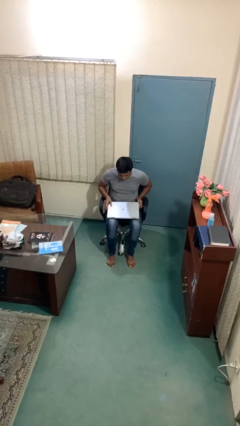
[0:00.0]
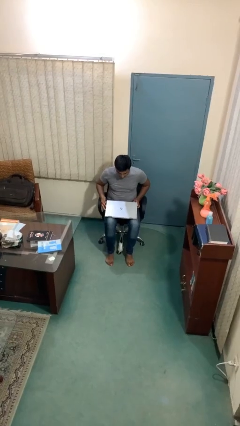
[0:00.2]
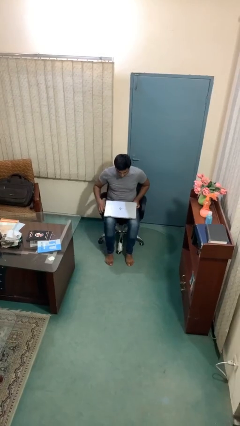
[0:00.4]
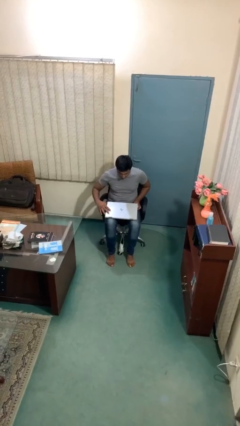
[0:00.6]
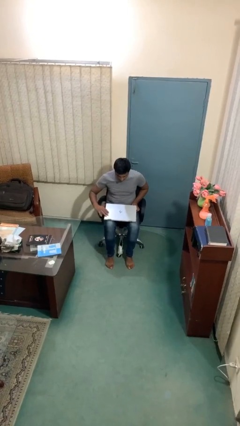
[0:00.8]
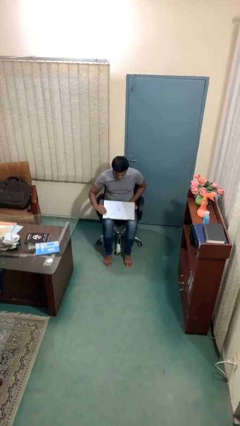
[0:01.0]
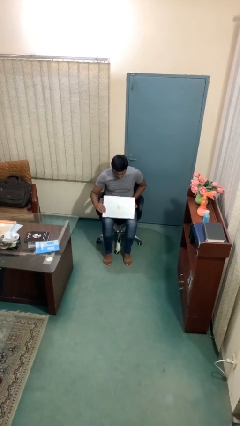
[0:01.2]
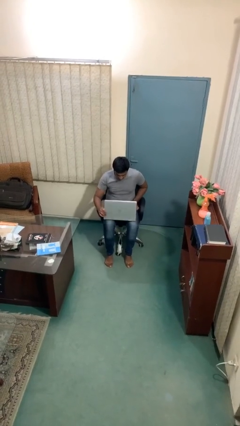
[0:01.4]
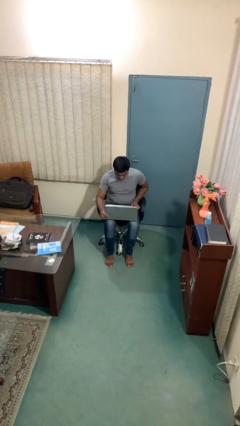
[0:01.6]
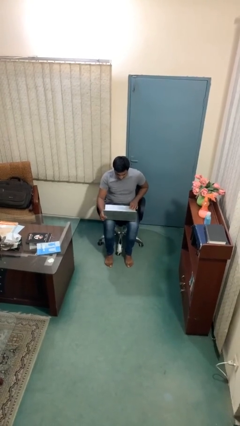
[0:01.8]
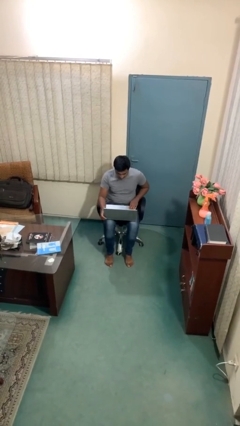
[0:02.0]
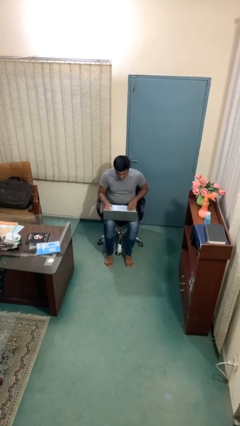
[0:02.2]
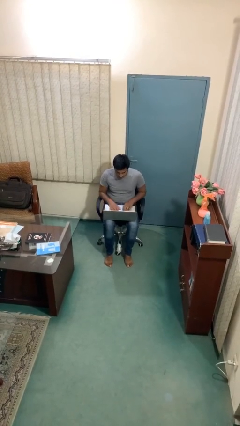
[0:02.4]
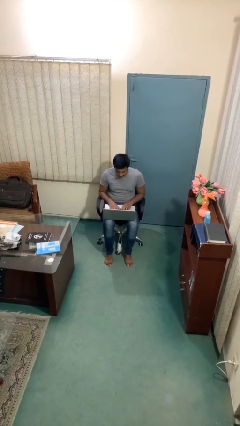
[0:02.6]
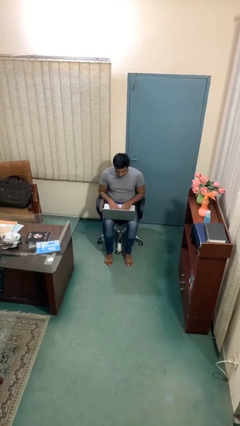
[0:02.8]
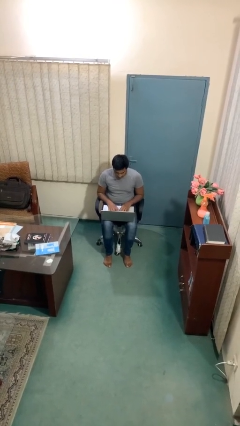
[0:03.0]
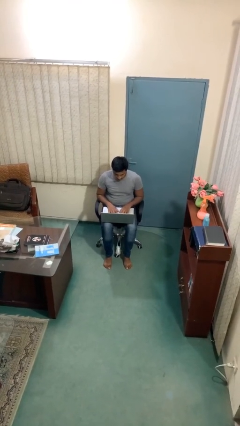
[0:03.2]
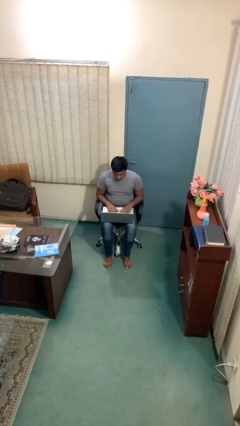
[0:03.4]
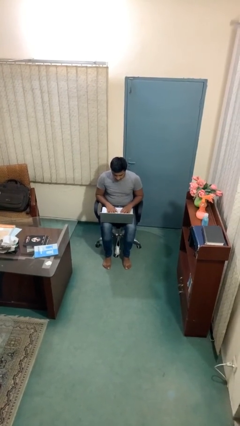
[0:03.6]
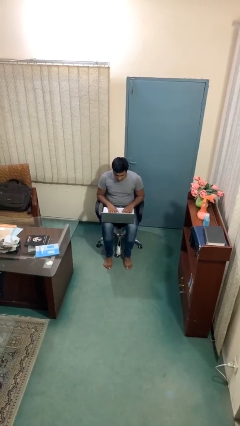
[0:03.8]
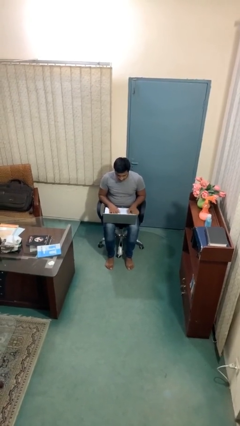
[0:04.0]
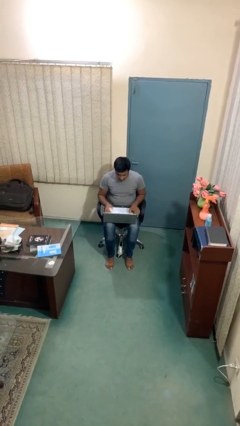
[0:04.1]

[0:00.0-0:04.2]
person interacts with laptop

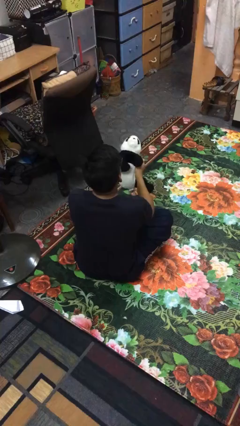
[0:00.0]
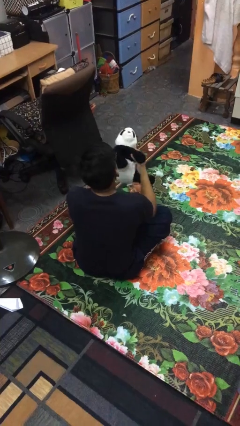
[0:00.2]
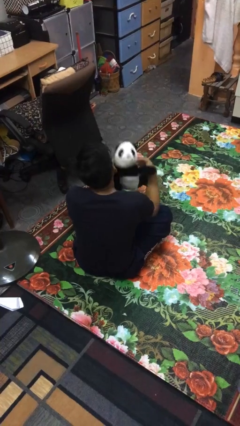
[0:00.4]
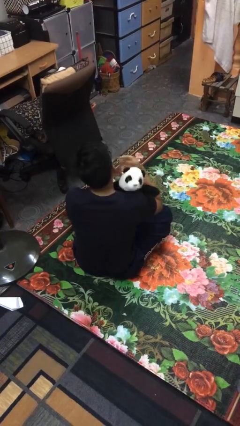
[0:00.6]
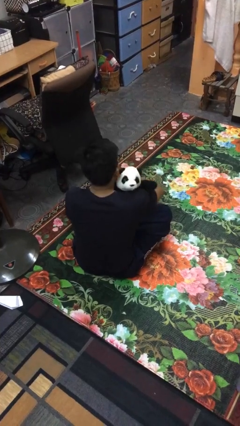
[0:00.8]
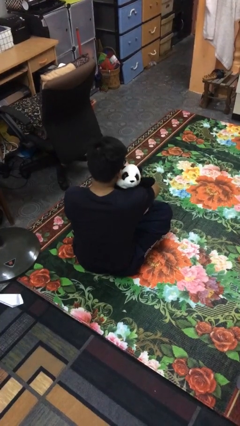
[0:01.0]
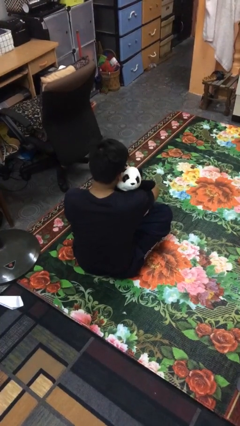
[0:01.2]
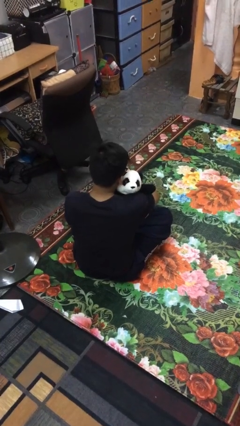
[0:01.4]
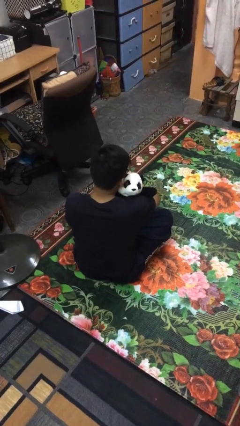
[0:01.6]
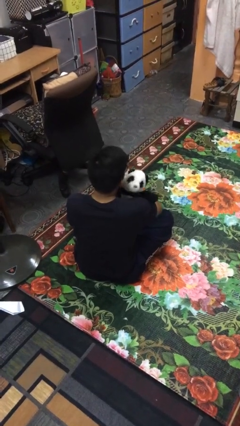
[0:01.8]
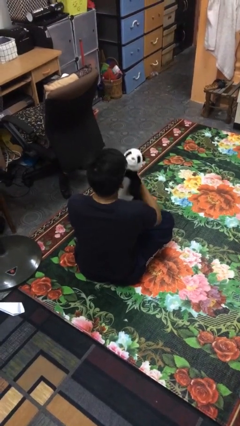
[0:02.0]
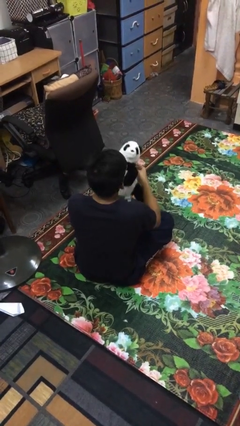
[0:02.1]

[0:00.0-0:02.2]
person hugs stuffed animal

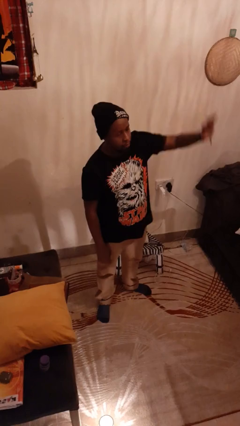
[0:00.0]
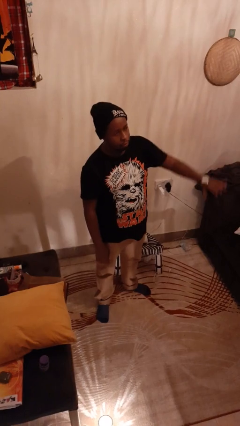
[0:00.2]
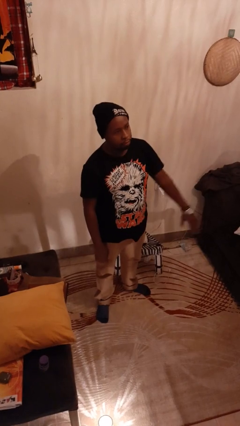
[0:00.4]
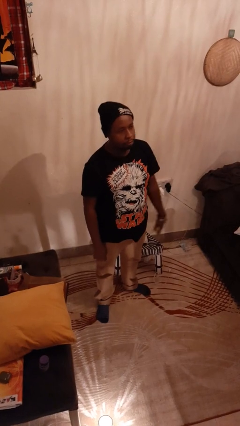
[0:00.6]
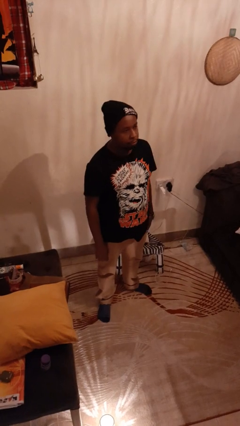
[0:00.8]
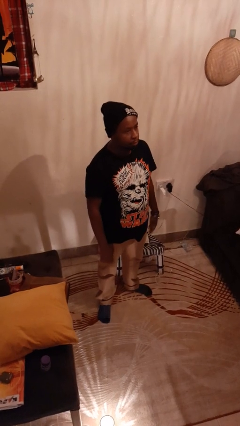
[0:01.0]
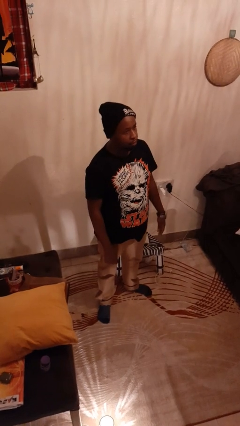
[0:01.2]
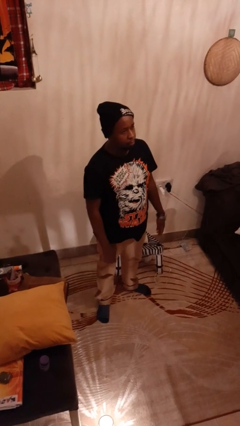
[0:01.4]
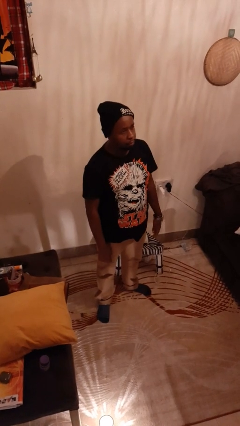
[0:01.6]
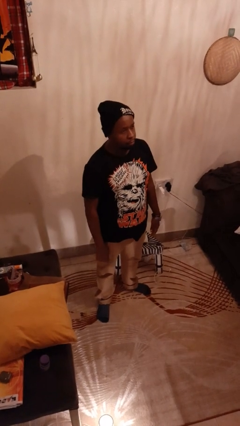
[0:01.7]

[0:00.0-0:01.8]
person gestures lower hand

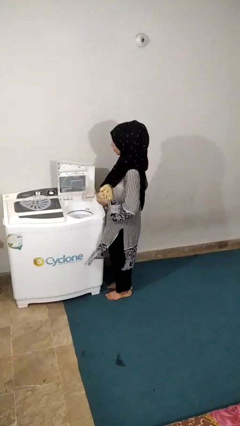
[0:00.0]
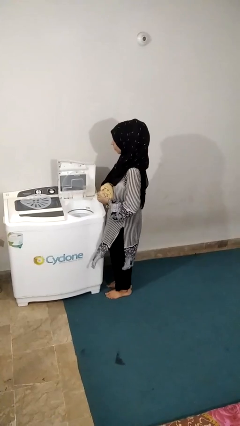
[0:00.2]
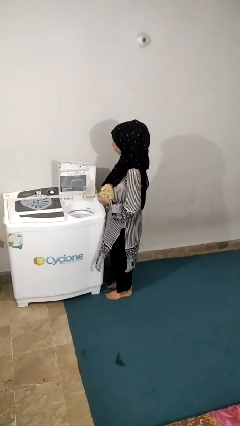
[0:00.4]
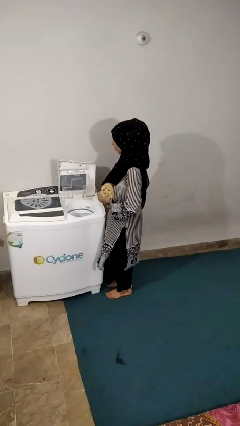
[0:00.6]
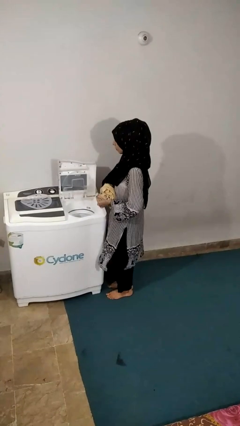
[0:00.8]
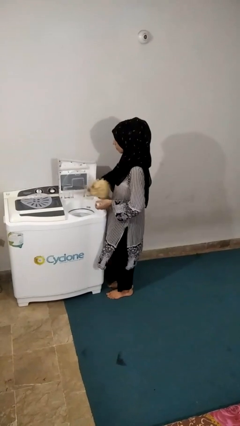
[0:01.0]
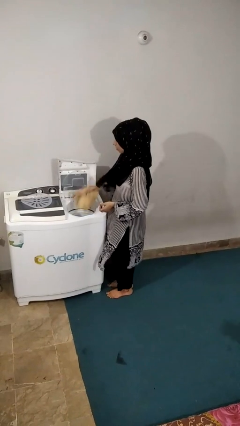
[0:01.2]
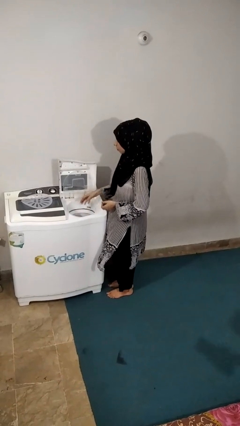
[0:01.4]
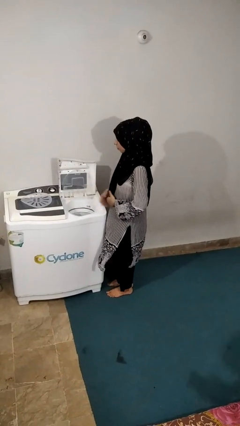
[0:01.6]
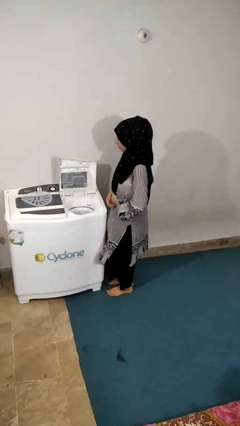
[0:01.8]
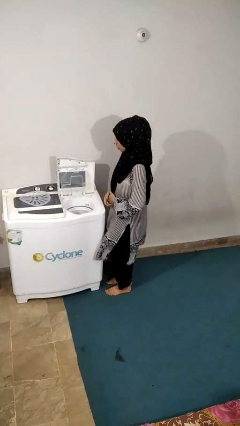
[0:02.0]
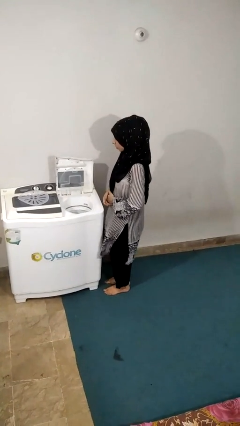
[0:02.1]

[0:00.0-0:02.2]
person loads dryer

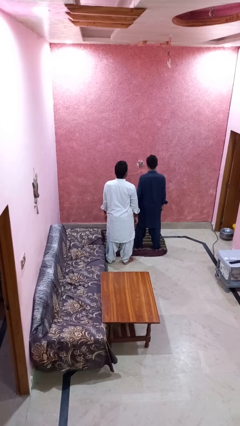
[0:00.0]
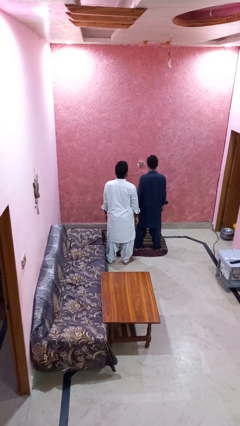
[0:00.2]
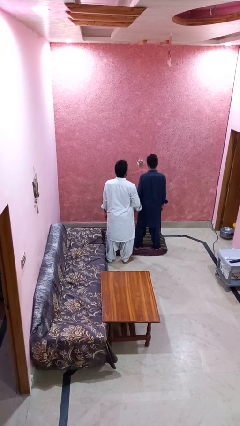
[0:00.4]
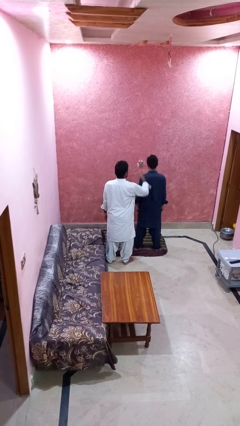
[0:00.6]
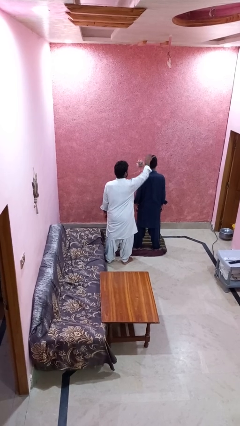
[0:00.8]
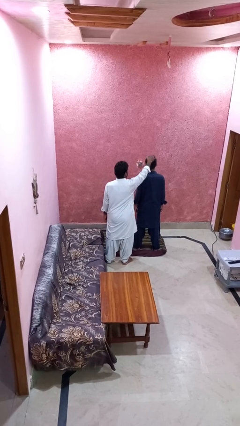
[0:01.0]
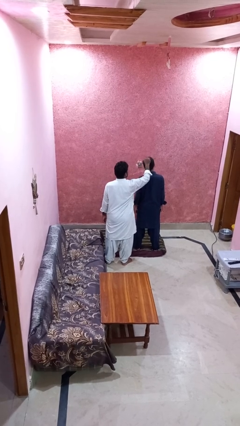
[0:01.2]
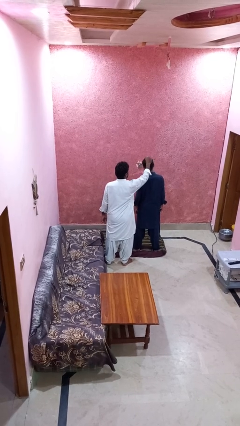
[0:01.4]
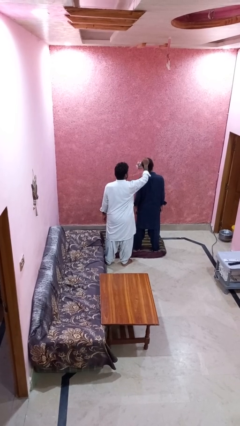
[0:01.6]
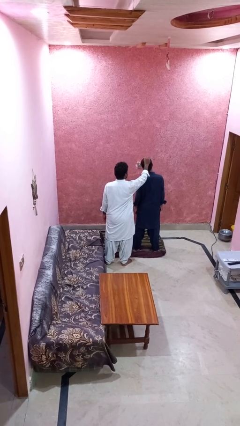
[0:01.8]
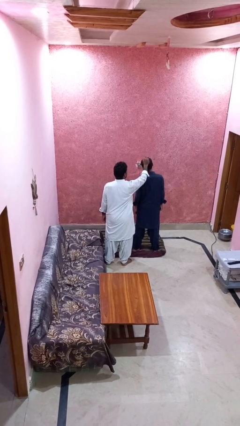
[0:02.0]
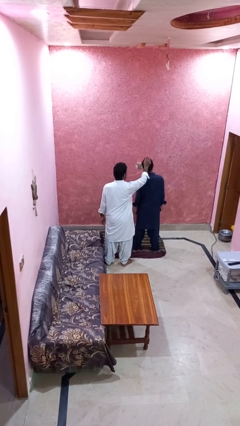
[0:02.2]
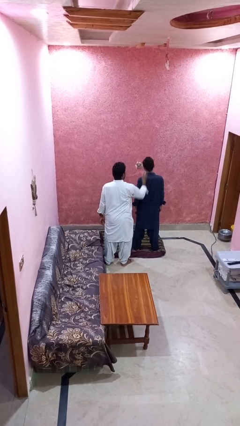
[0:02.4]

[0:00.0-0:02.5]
person grabs person by hair

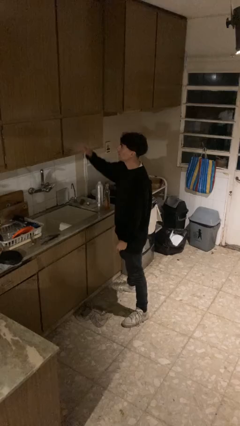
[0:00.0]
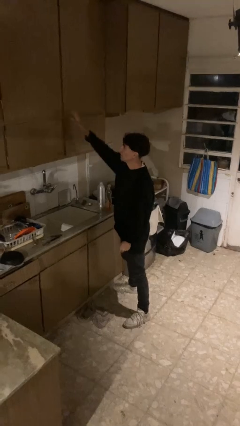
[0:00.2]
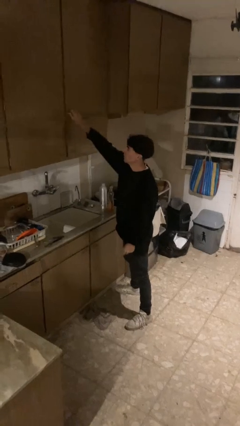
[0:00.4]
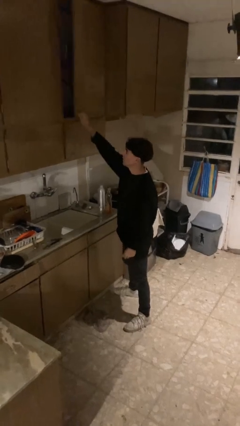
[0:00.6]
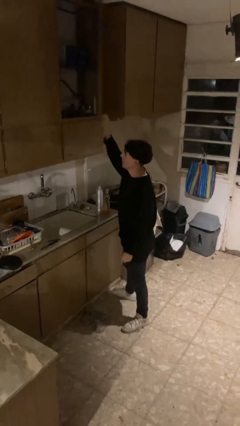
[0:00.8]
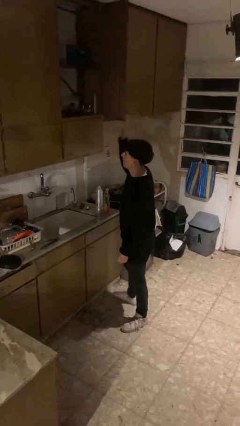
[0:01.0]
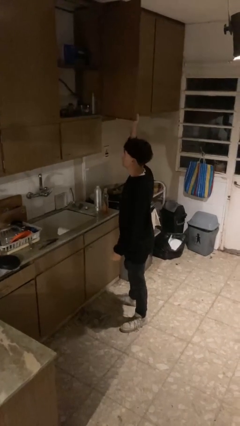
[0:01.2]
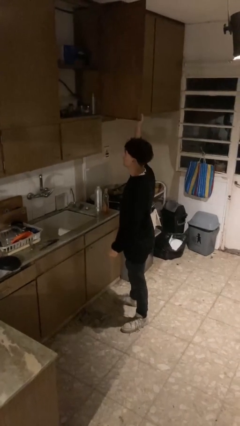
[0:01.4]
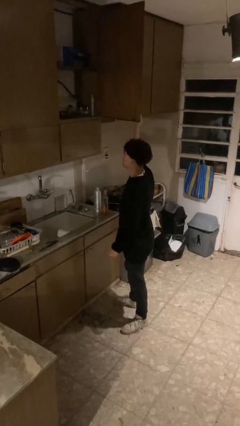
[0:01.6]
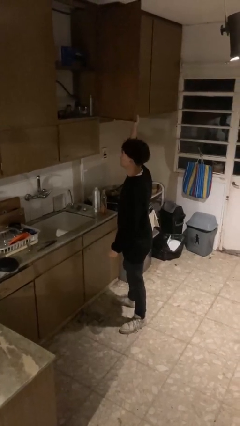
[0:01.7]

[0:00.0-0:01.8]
person closes cabinet

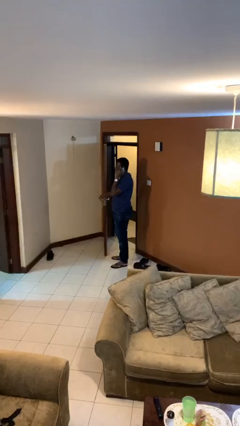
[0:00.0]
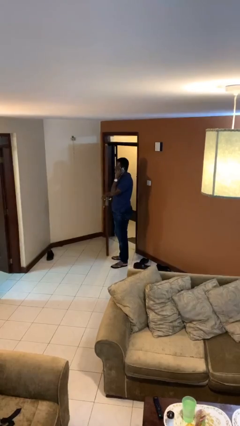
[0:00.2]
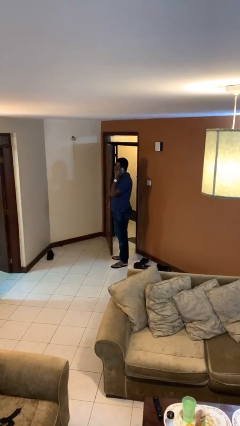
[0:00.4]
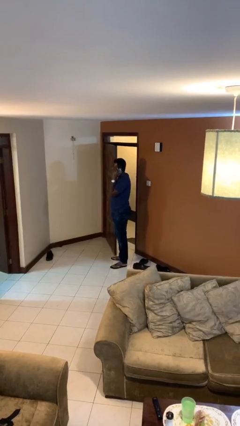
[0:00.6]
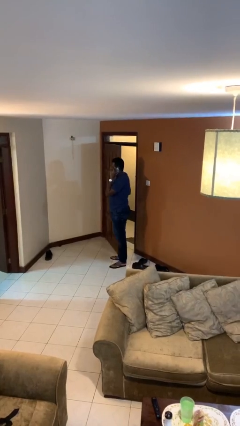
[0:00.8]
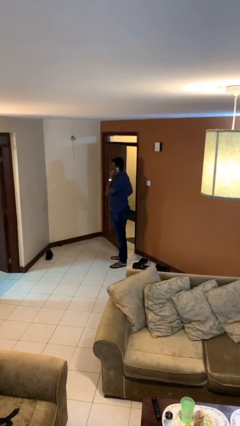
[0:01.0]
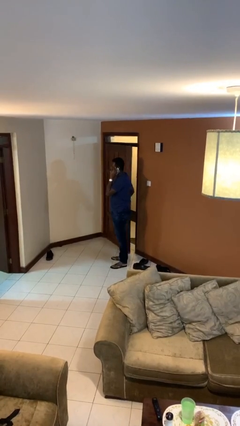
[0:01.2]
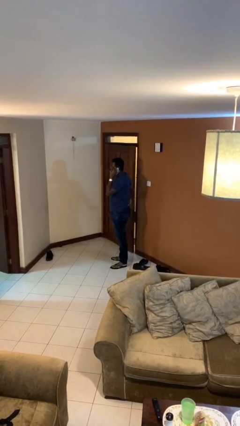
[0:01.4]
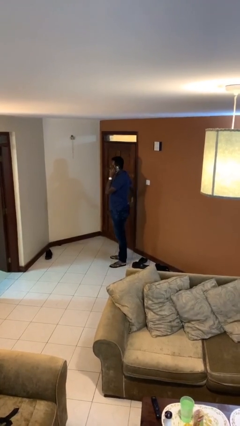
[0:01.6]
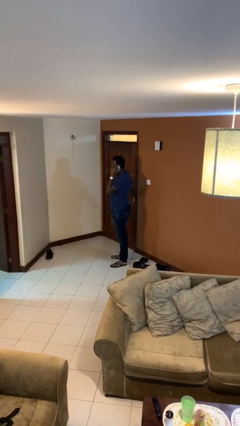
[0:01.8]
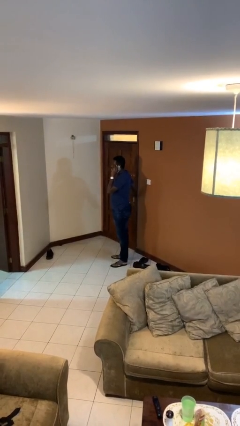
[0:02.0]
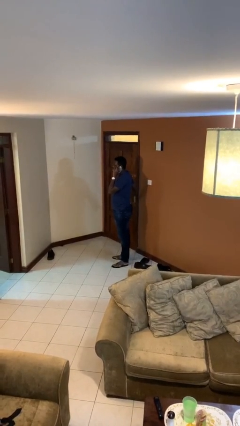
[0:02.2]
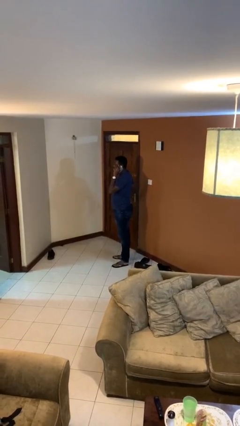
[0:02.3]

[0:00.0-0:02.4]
person closes facility door

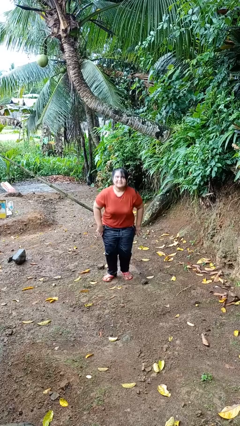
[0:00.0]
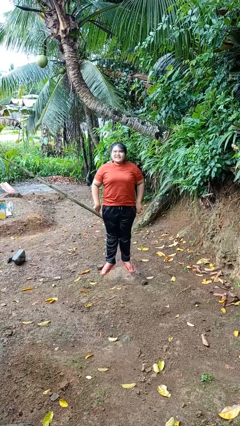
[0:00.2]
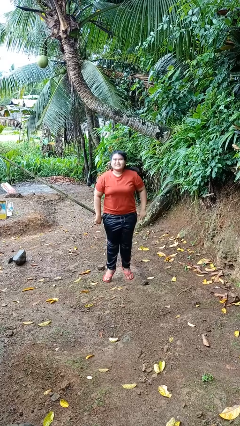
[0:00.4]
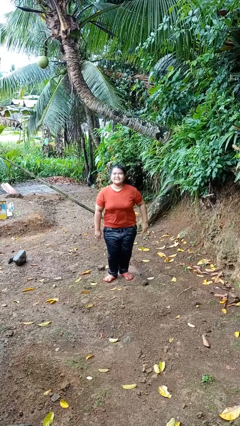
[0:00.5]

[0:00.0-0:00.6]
person jumps
